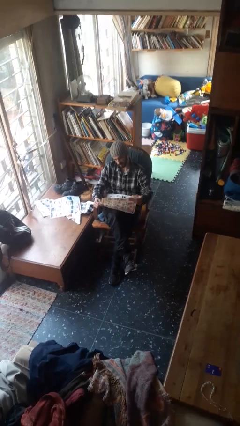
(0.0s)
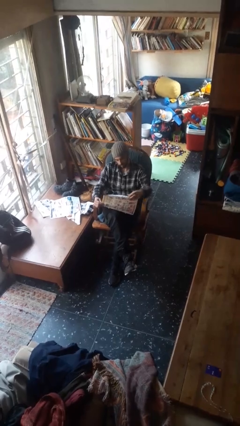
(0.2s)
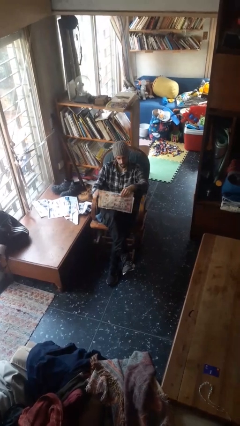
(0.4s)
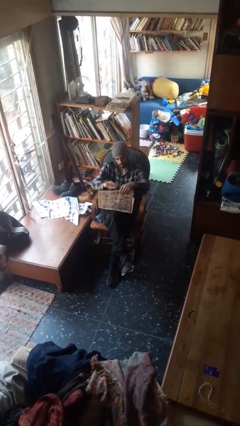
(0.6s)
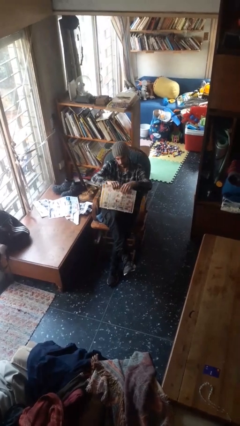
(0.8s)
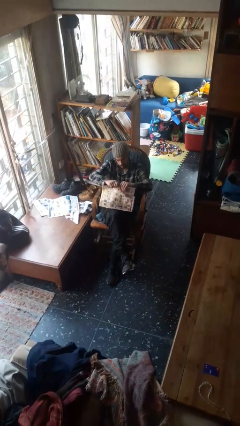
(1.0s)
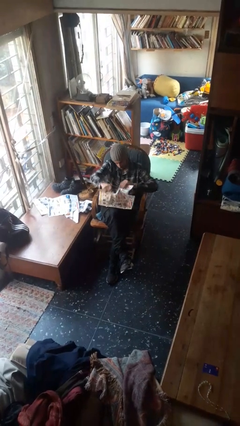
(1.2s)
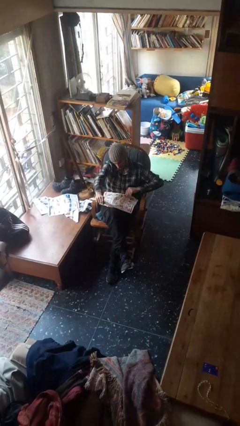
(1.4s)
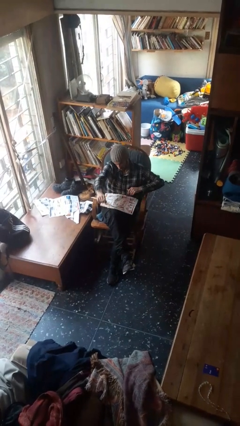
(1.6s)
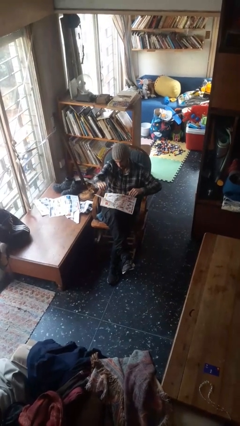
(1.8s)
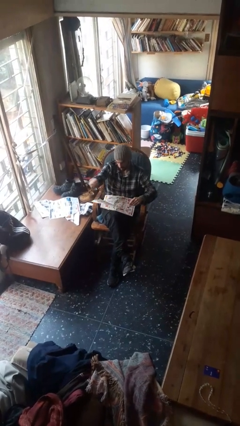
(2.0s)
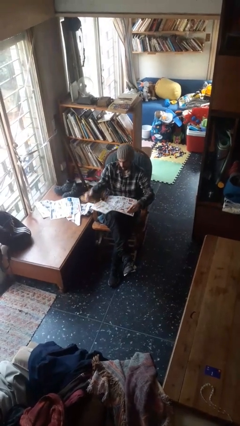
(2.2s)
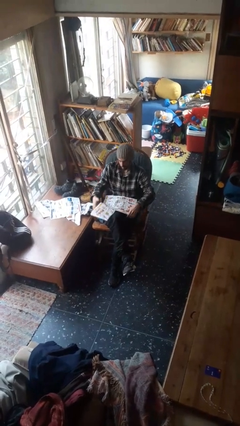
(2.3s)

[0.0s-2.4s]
person tears paper

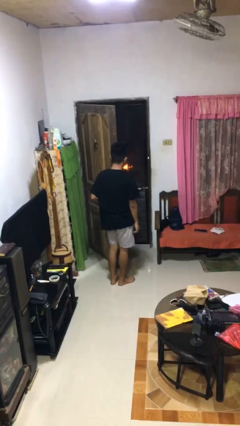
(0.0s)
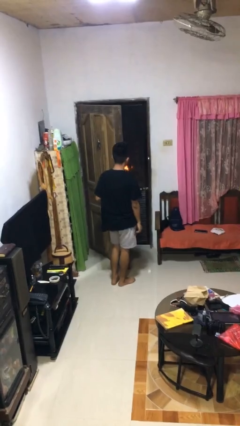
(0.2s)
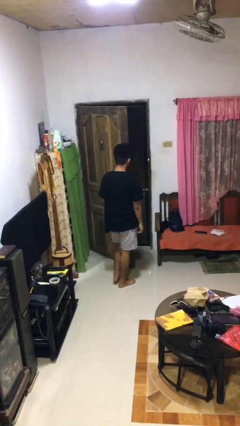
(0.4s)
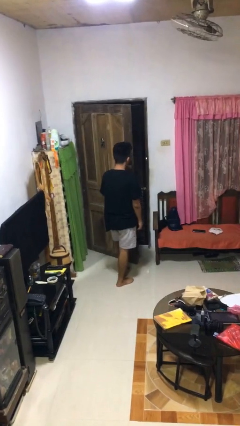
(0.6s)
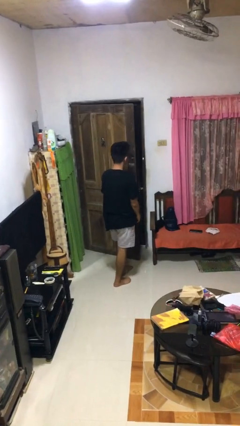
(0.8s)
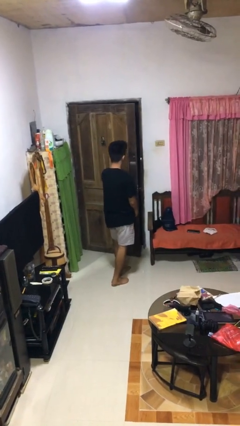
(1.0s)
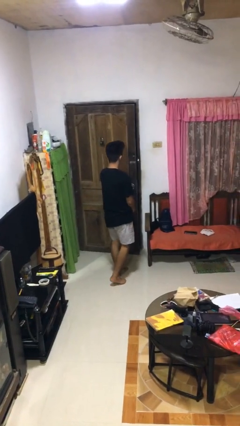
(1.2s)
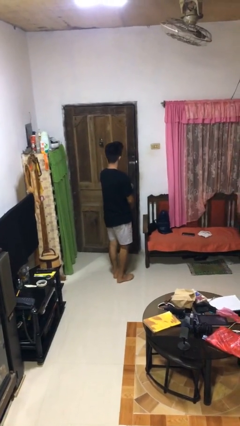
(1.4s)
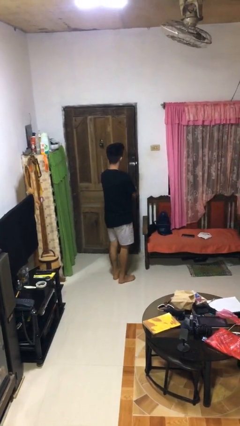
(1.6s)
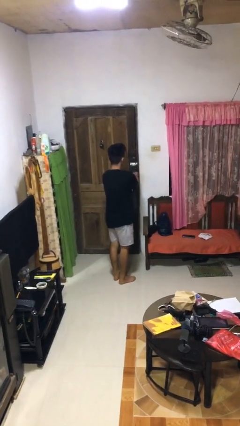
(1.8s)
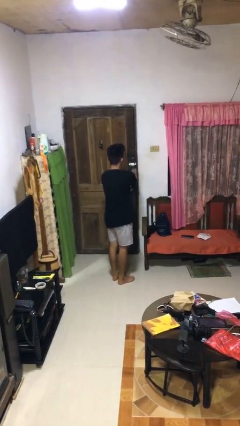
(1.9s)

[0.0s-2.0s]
person closes facility door

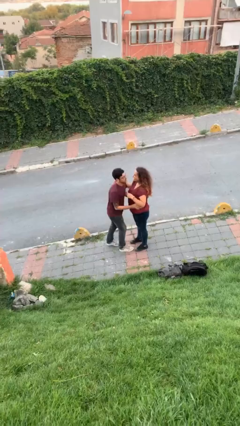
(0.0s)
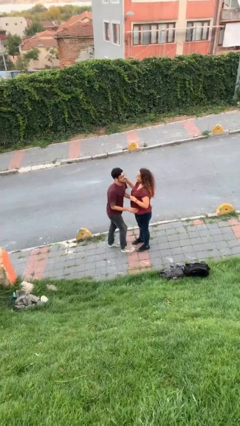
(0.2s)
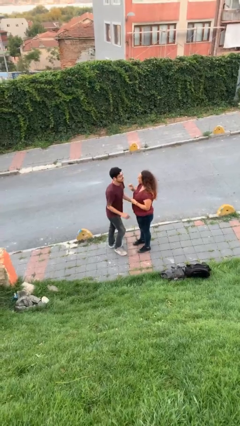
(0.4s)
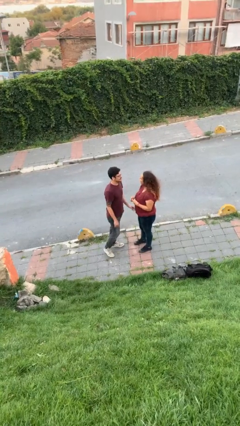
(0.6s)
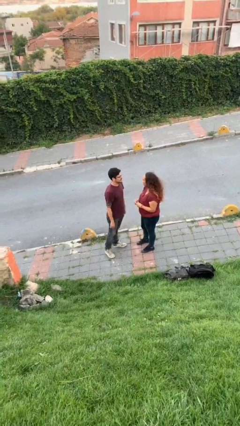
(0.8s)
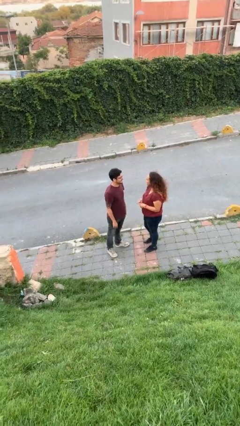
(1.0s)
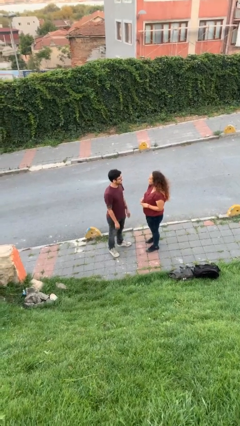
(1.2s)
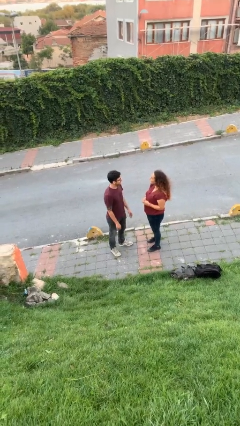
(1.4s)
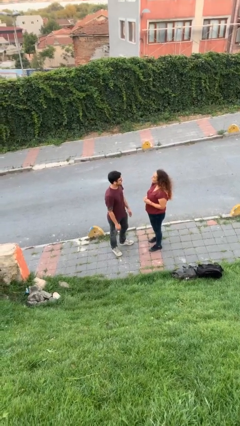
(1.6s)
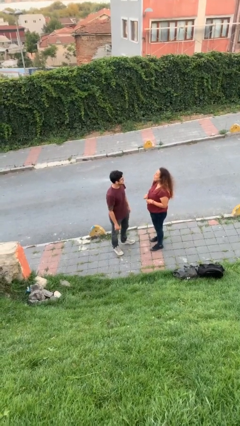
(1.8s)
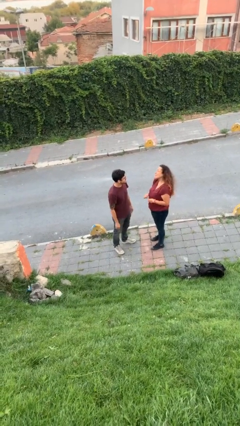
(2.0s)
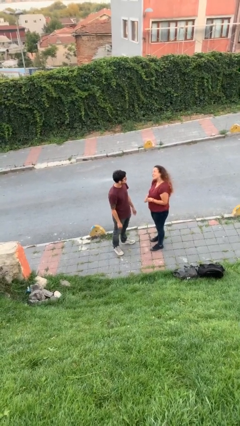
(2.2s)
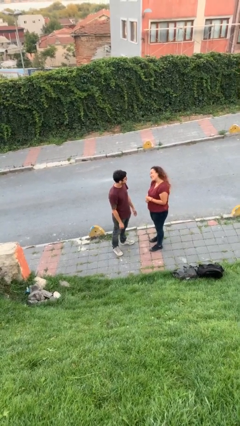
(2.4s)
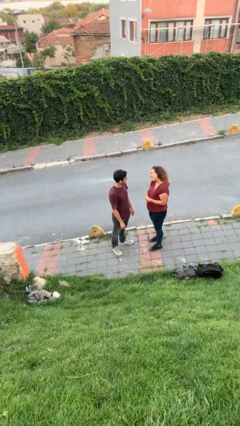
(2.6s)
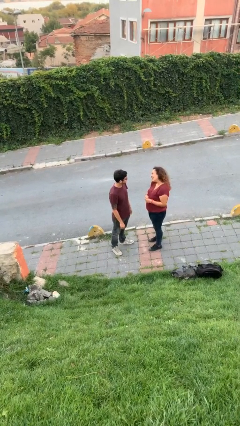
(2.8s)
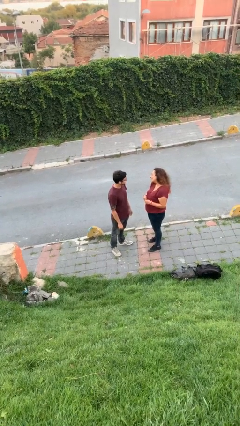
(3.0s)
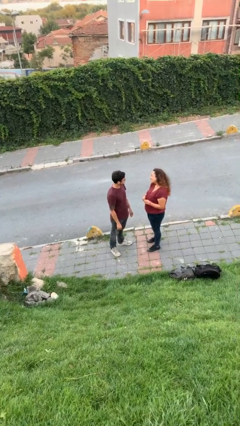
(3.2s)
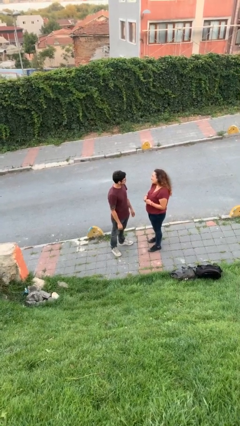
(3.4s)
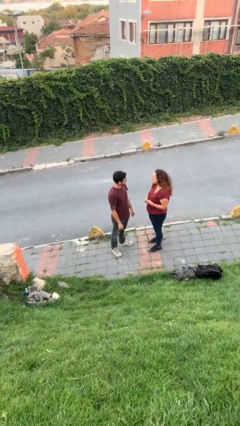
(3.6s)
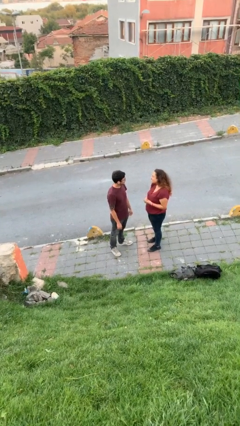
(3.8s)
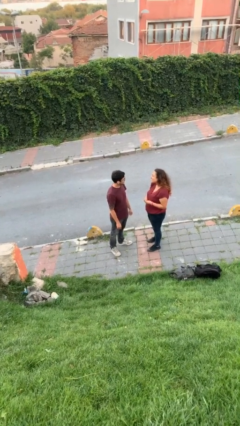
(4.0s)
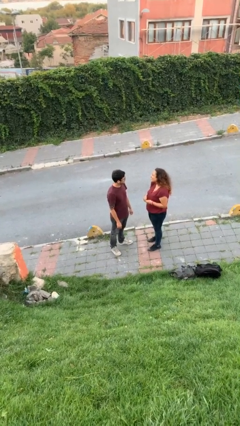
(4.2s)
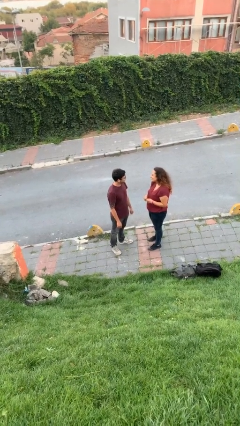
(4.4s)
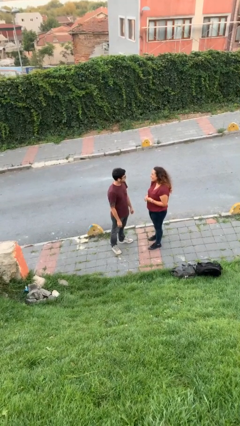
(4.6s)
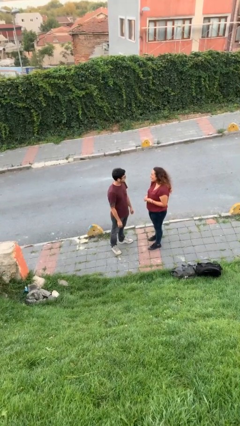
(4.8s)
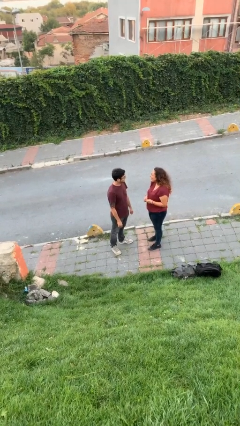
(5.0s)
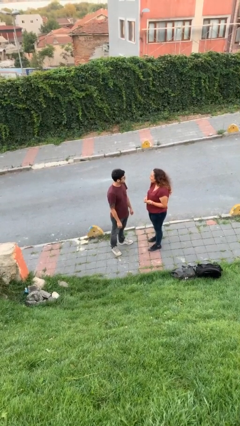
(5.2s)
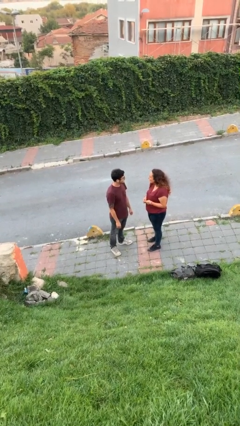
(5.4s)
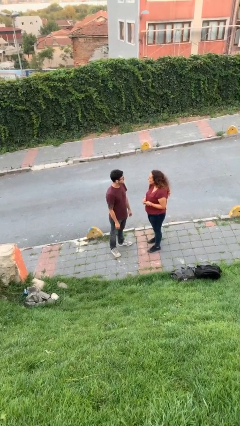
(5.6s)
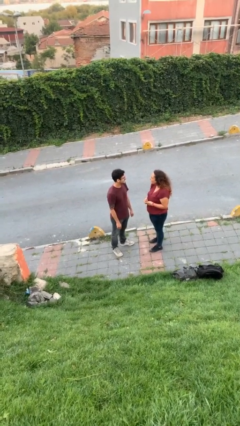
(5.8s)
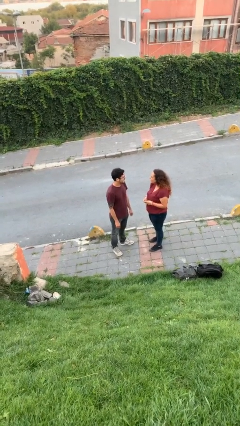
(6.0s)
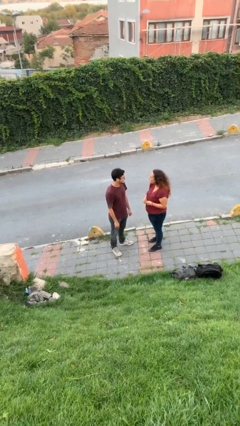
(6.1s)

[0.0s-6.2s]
person talks to person

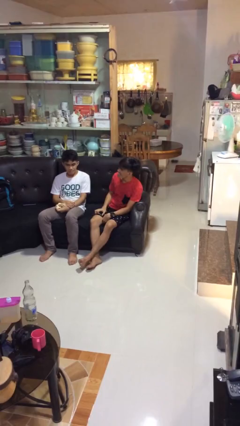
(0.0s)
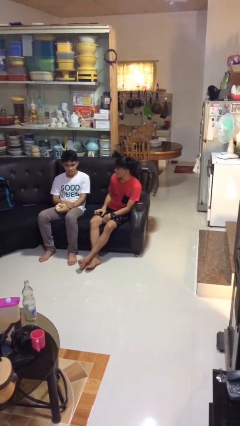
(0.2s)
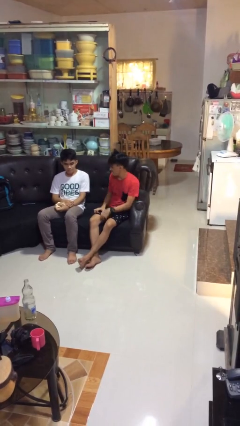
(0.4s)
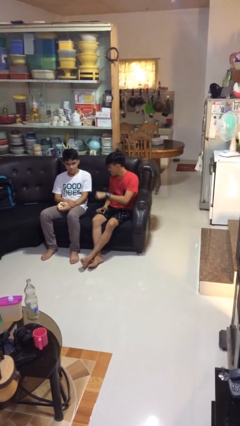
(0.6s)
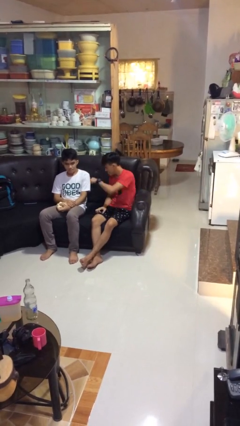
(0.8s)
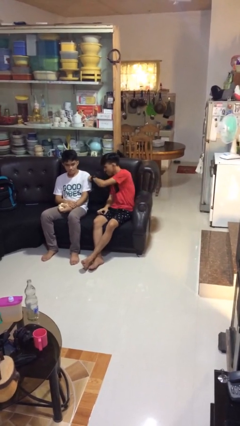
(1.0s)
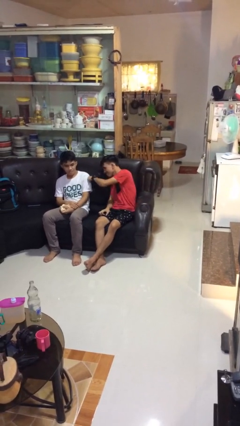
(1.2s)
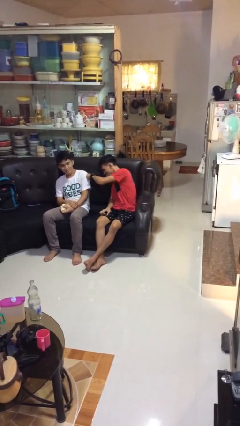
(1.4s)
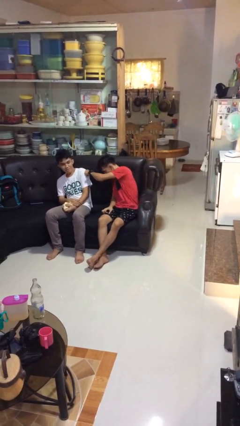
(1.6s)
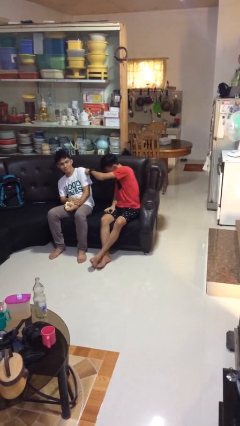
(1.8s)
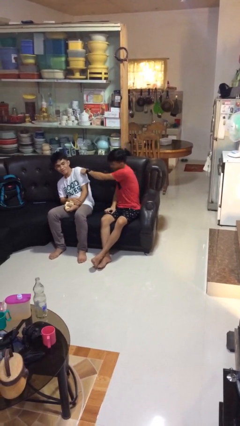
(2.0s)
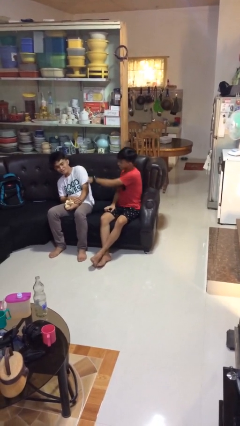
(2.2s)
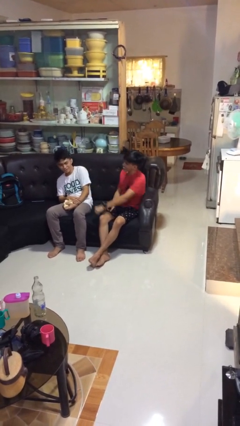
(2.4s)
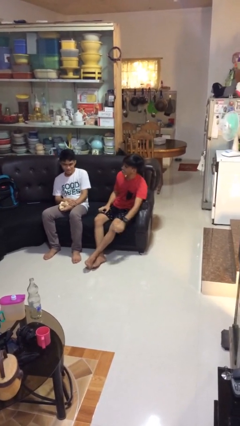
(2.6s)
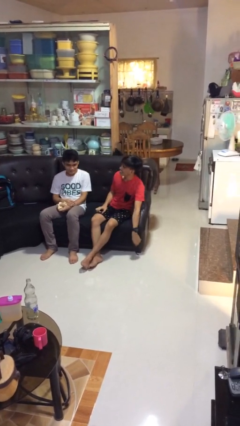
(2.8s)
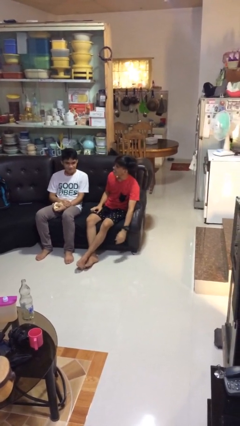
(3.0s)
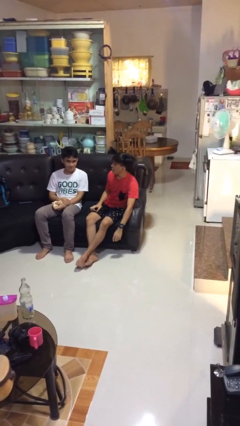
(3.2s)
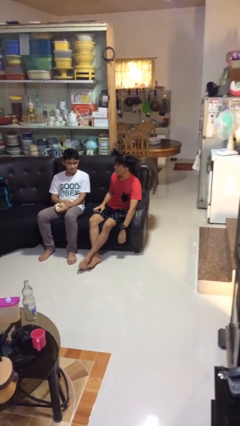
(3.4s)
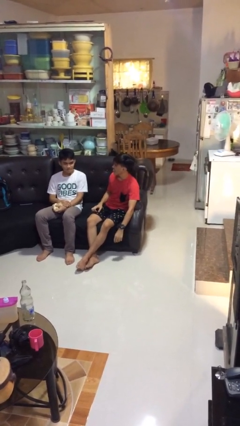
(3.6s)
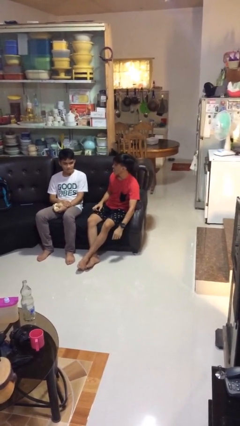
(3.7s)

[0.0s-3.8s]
person pounds shoulders of person

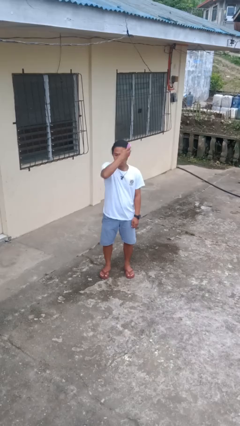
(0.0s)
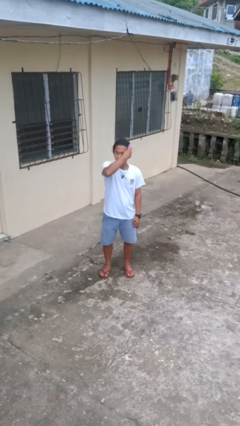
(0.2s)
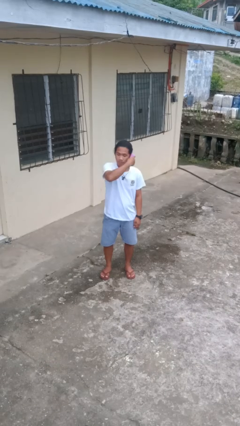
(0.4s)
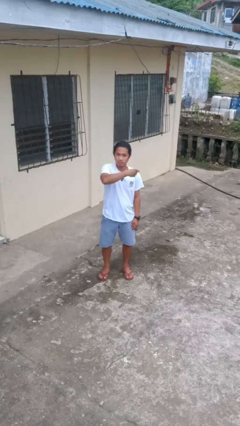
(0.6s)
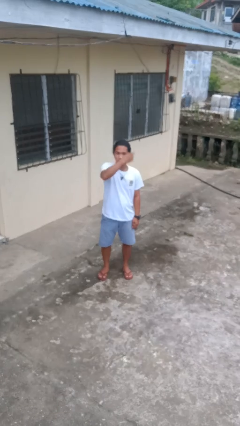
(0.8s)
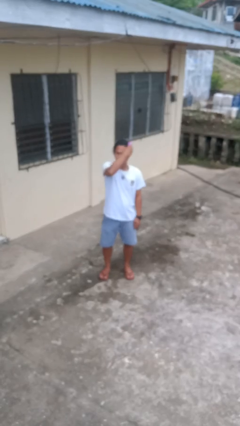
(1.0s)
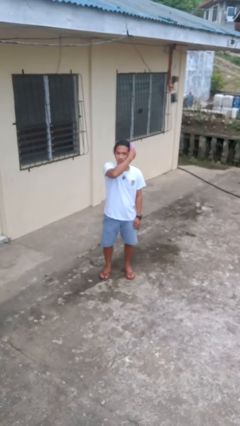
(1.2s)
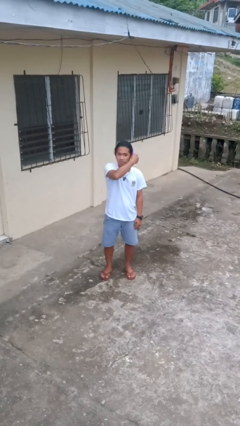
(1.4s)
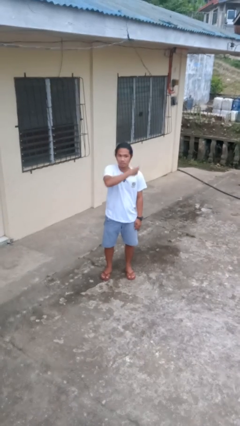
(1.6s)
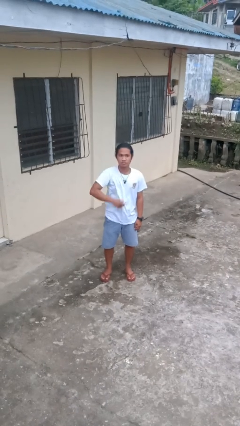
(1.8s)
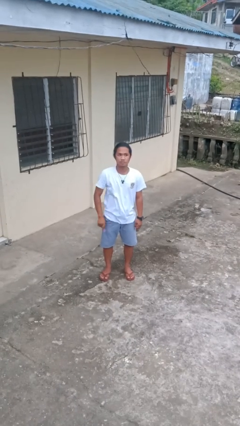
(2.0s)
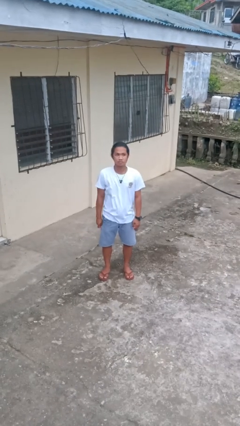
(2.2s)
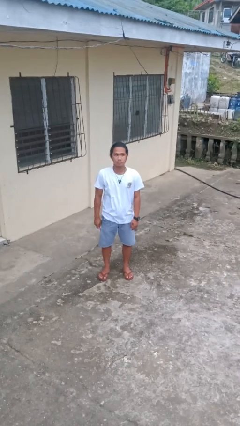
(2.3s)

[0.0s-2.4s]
person brushes hair

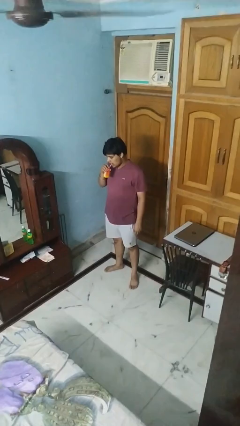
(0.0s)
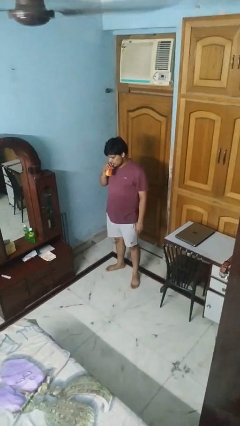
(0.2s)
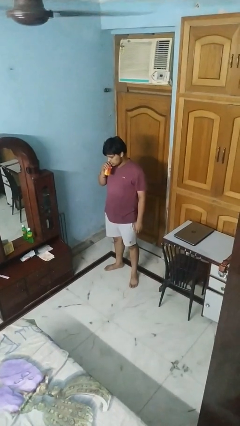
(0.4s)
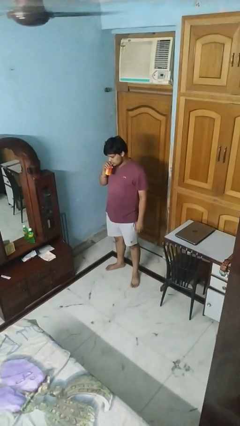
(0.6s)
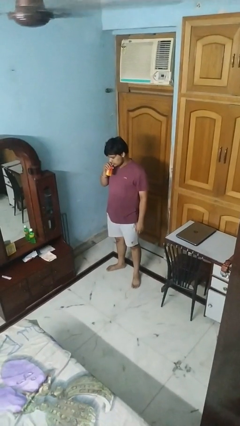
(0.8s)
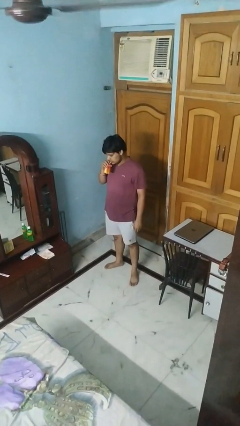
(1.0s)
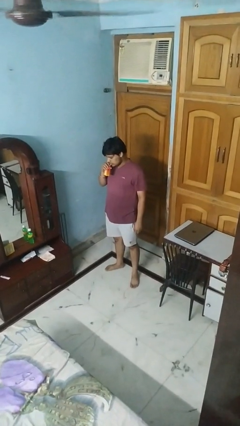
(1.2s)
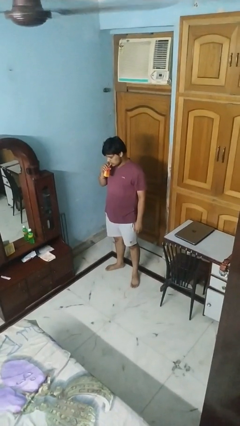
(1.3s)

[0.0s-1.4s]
person drinks from straw
